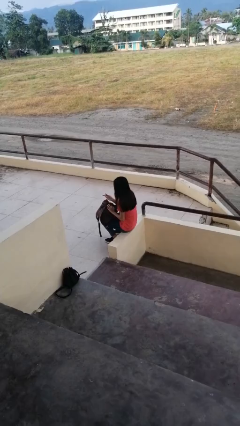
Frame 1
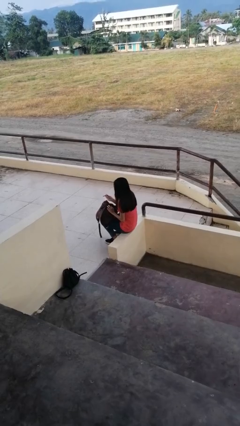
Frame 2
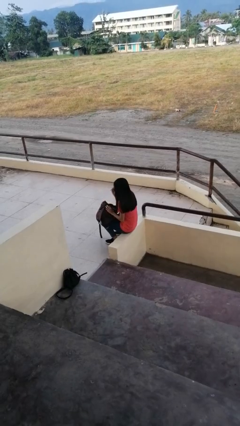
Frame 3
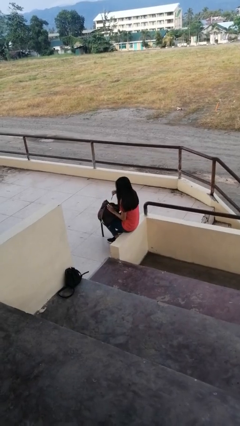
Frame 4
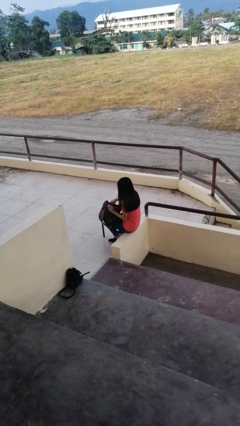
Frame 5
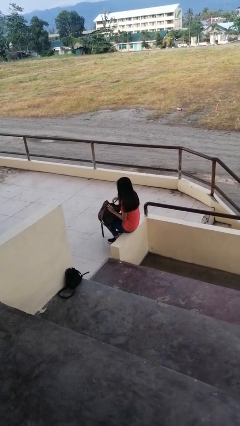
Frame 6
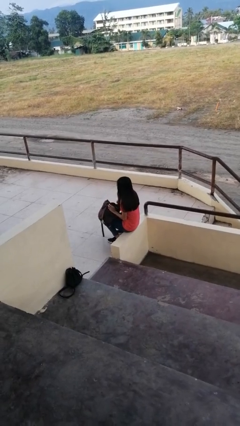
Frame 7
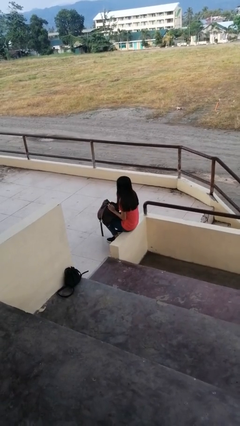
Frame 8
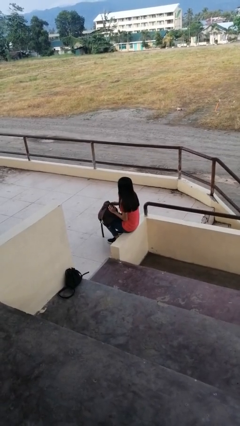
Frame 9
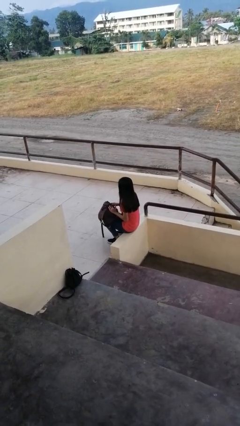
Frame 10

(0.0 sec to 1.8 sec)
person puts object into backpack

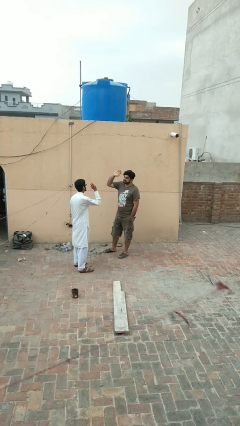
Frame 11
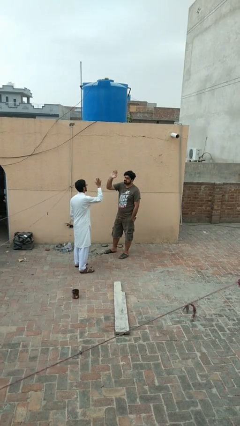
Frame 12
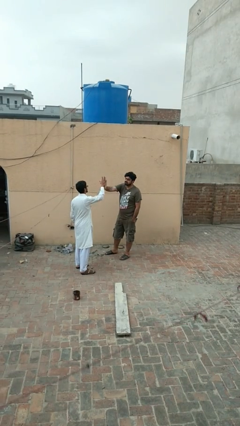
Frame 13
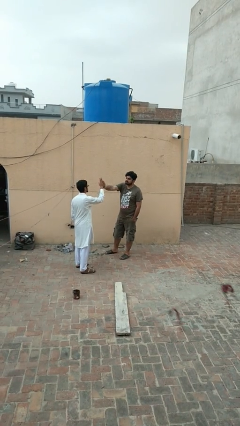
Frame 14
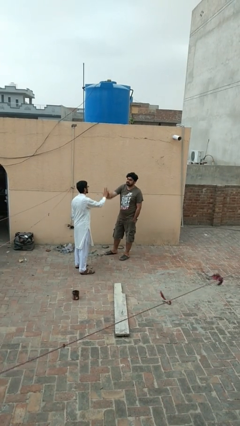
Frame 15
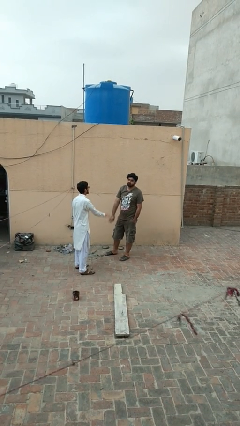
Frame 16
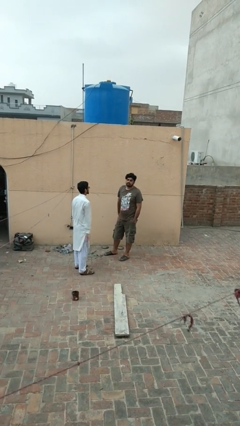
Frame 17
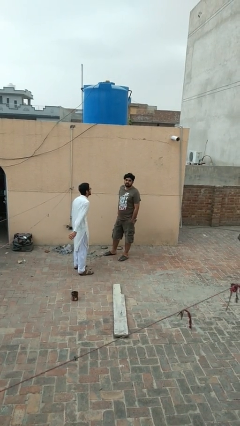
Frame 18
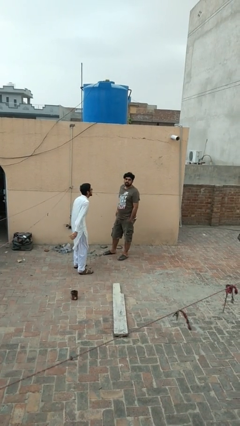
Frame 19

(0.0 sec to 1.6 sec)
person highfives hand

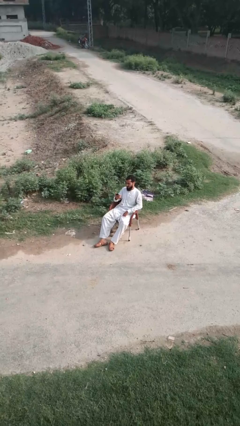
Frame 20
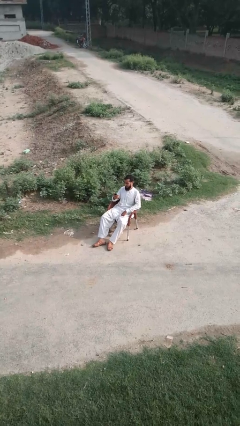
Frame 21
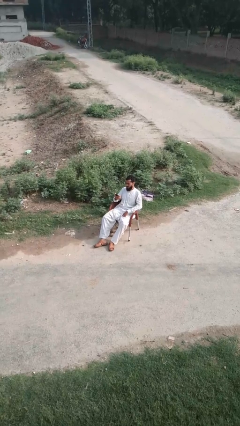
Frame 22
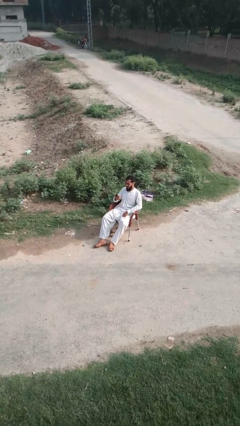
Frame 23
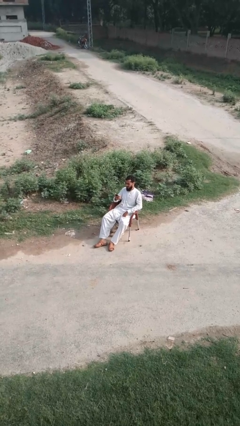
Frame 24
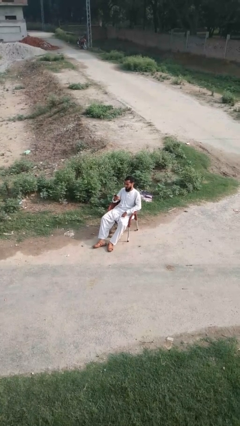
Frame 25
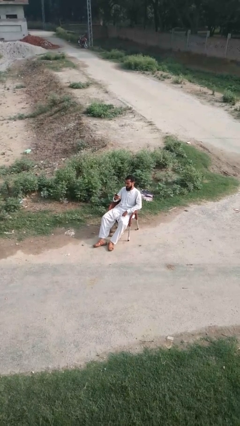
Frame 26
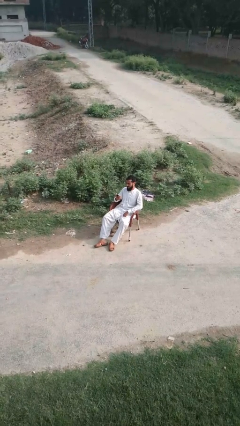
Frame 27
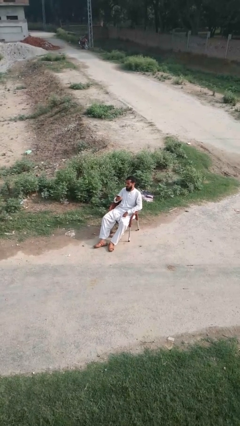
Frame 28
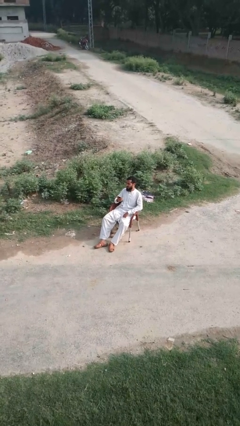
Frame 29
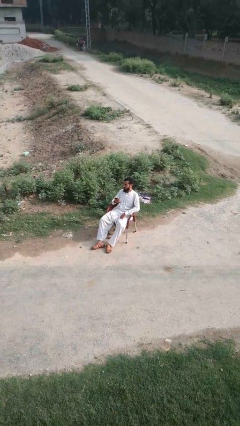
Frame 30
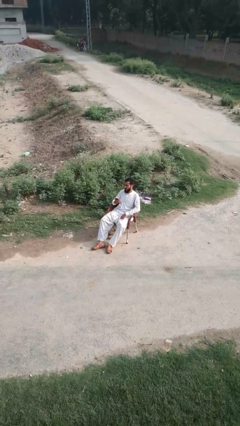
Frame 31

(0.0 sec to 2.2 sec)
person puts phone into pocket

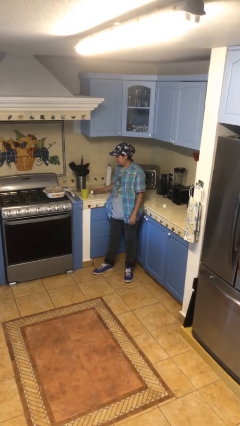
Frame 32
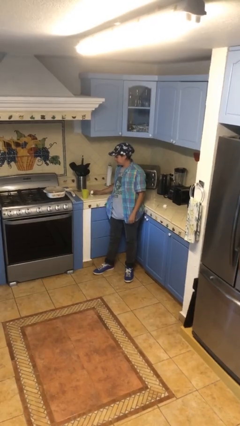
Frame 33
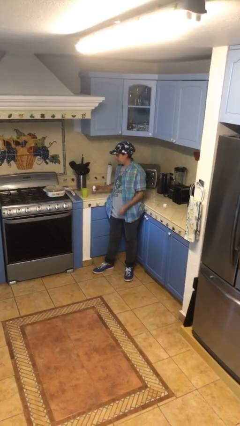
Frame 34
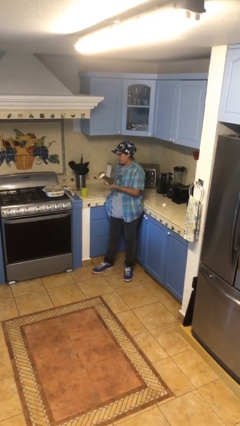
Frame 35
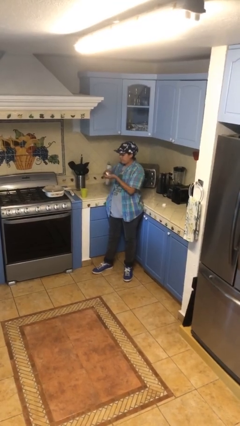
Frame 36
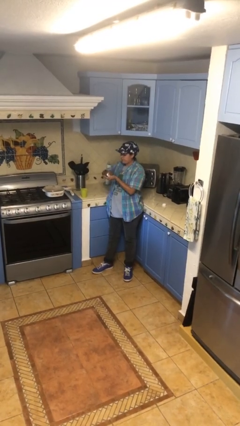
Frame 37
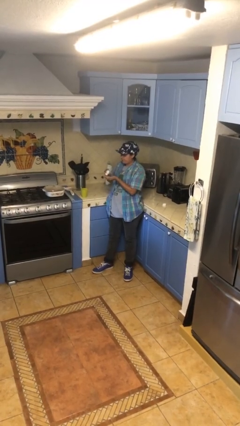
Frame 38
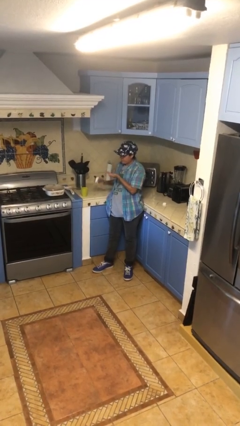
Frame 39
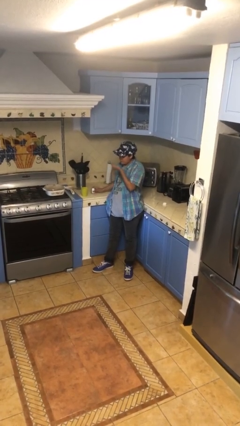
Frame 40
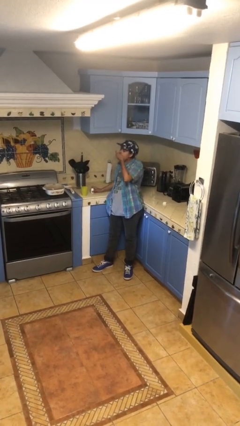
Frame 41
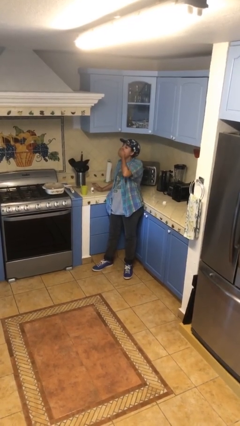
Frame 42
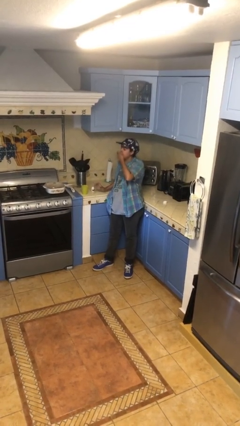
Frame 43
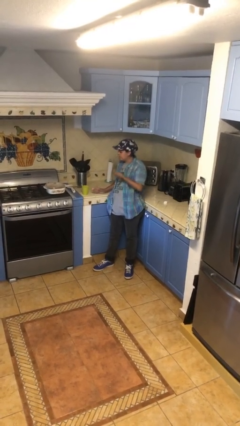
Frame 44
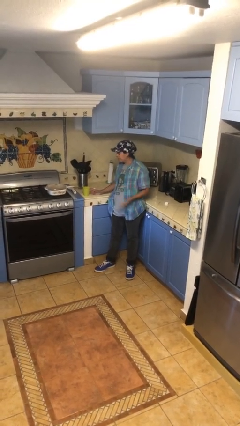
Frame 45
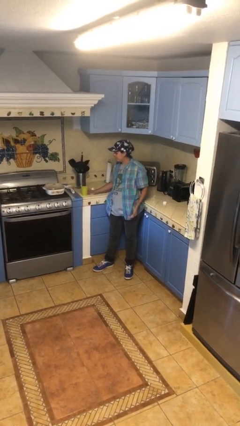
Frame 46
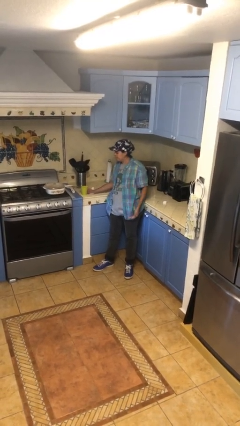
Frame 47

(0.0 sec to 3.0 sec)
person takes medicine pills

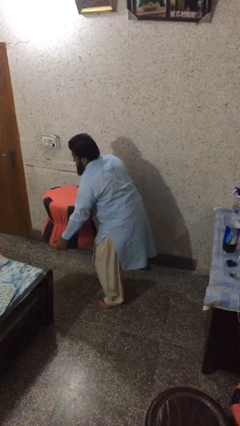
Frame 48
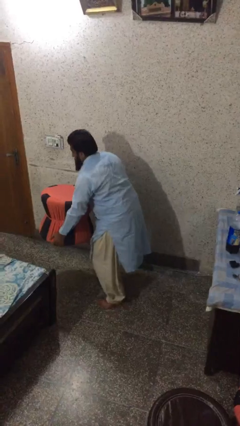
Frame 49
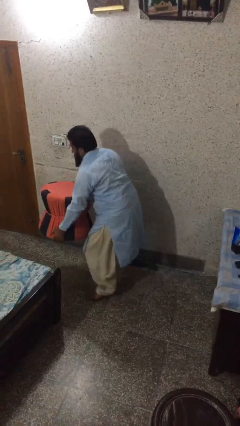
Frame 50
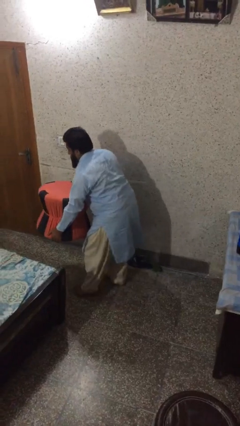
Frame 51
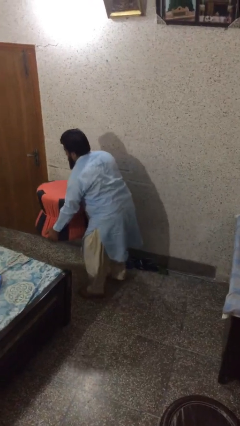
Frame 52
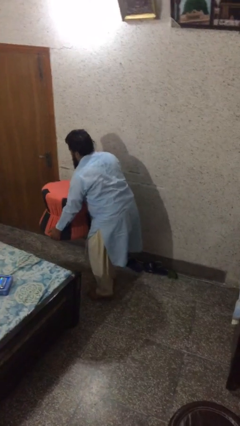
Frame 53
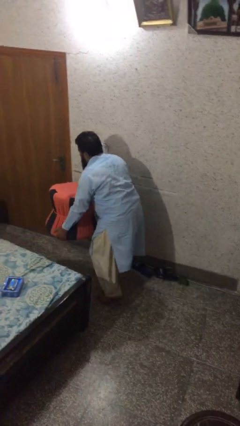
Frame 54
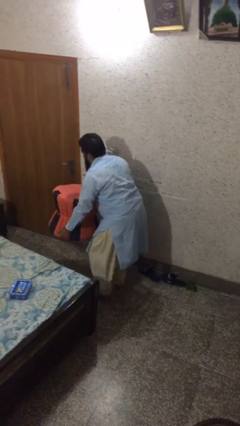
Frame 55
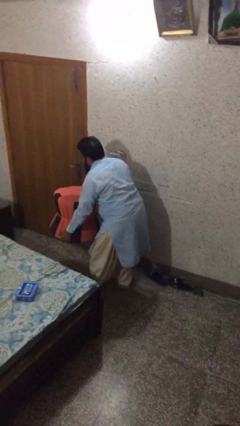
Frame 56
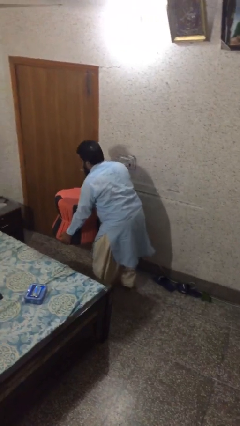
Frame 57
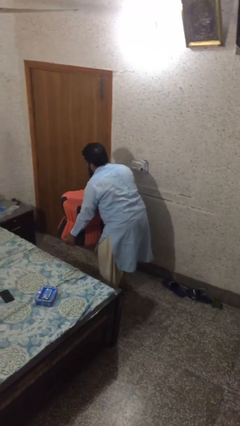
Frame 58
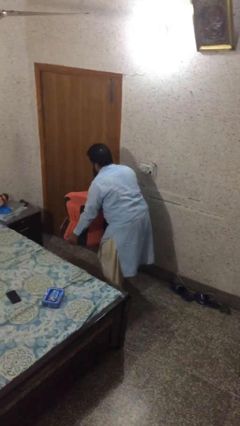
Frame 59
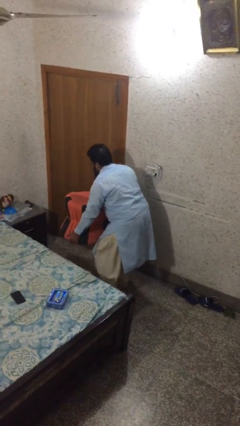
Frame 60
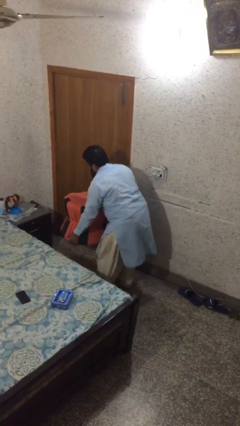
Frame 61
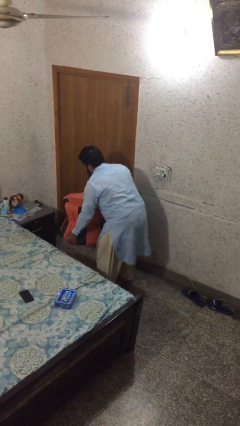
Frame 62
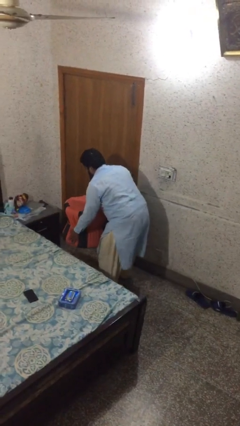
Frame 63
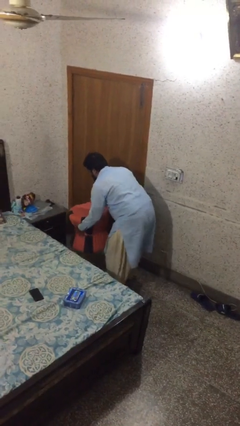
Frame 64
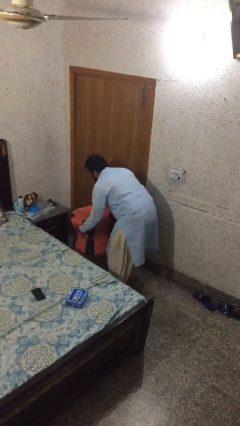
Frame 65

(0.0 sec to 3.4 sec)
person carries heavy object

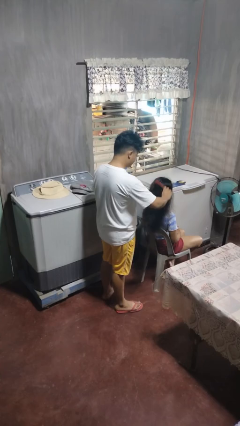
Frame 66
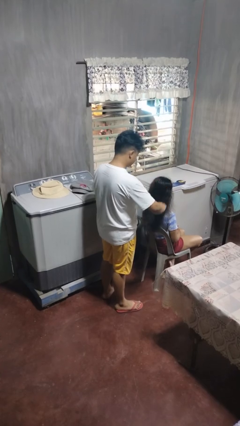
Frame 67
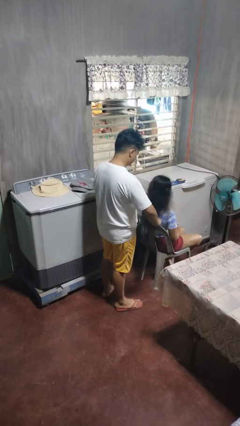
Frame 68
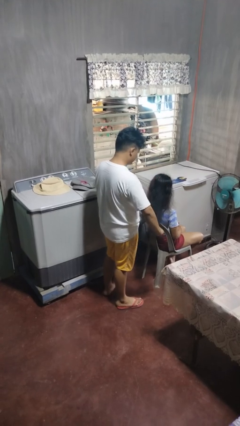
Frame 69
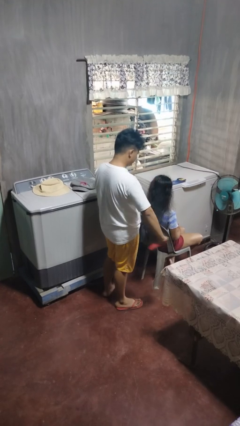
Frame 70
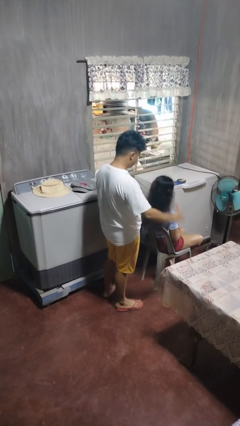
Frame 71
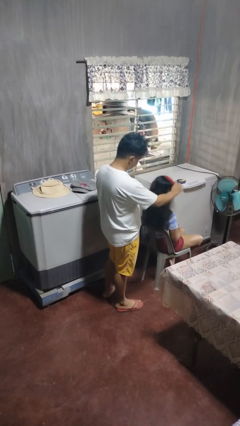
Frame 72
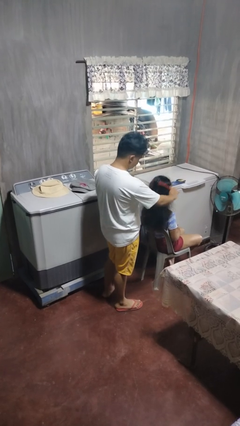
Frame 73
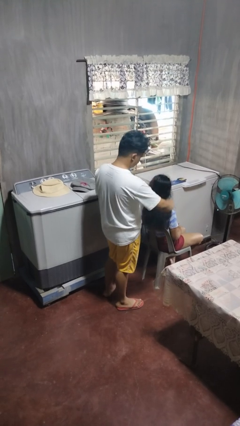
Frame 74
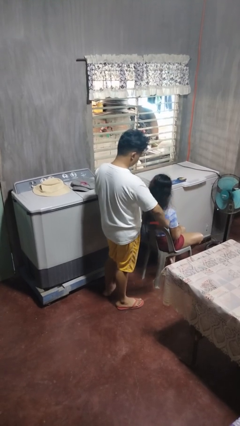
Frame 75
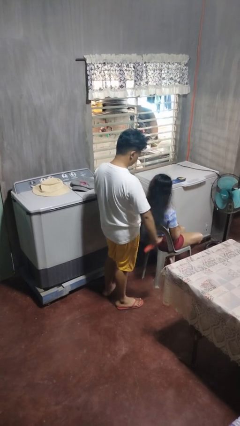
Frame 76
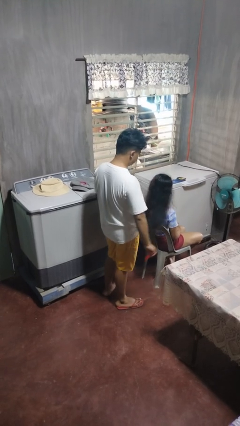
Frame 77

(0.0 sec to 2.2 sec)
person brushes hair of person

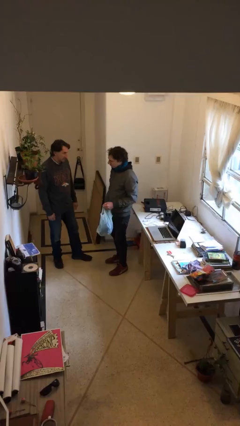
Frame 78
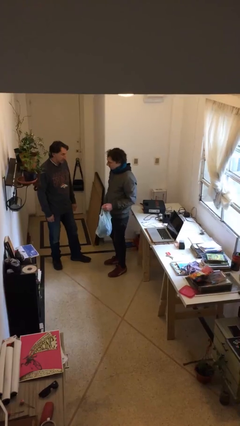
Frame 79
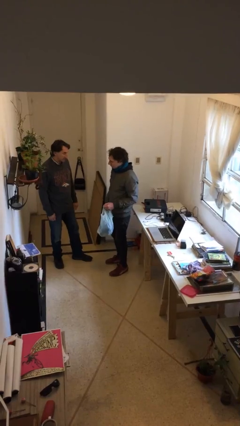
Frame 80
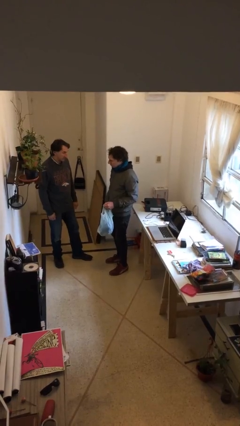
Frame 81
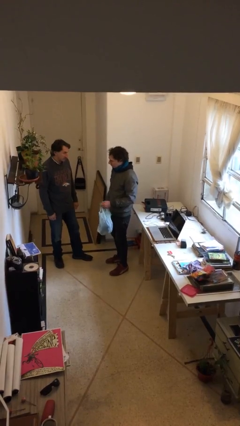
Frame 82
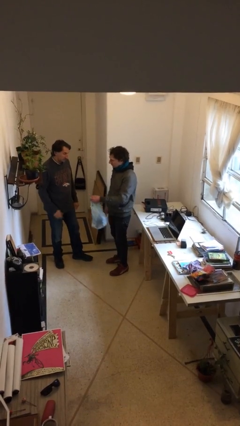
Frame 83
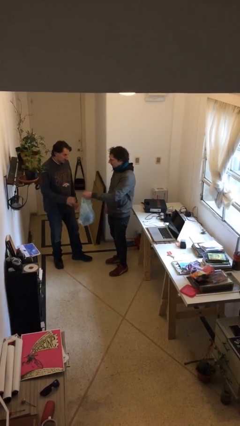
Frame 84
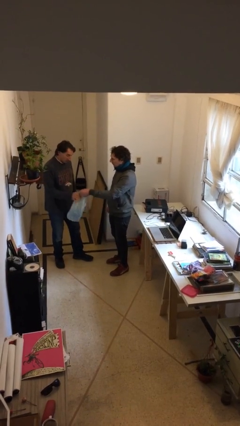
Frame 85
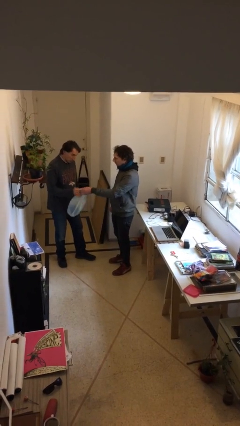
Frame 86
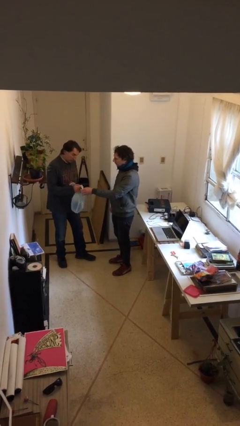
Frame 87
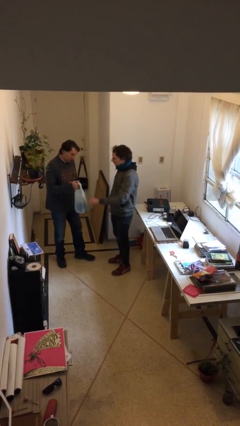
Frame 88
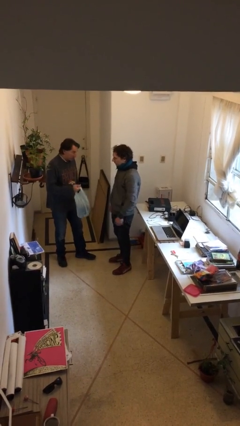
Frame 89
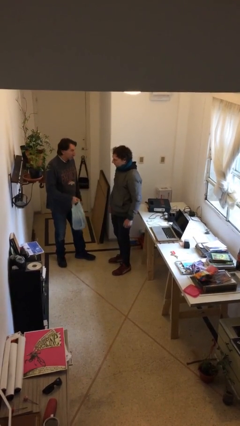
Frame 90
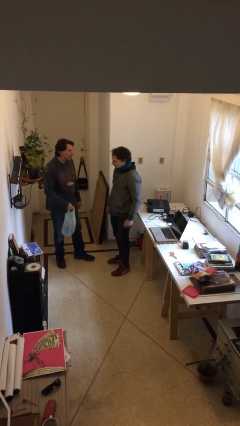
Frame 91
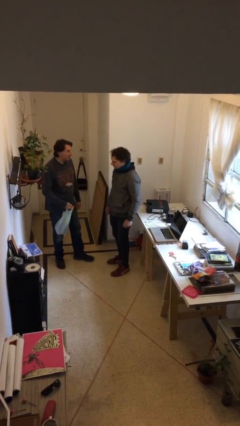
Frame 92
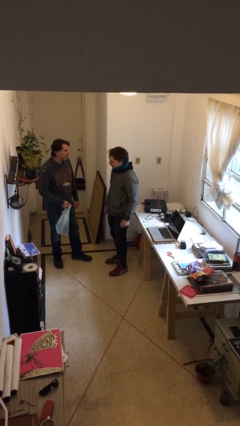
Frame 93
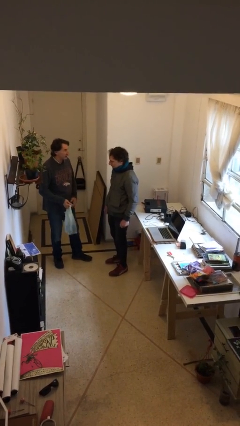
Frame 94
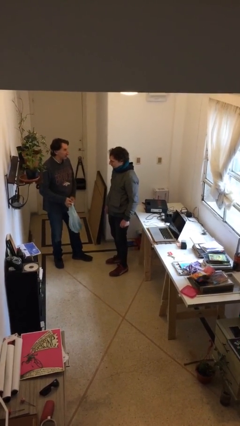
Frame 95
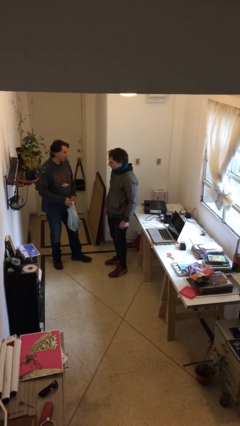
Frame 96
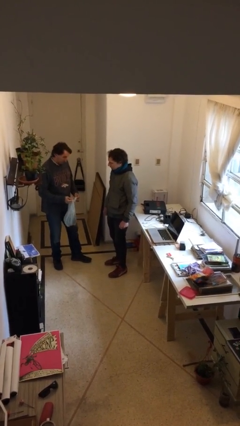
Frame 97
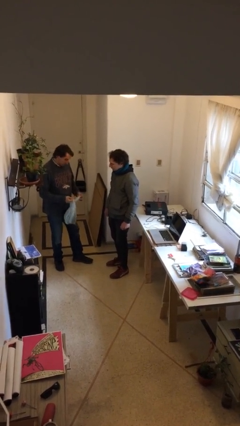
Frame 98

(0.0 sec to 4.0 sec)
person transfers object to person
